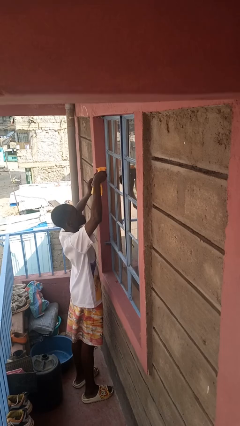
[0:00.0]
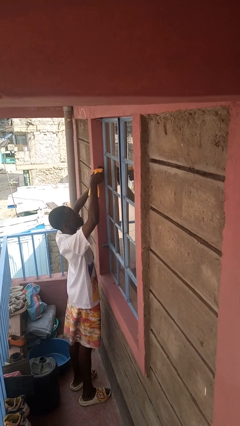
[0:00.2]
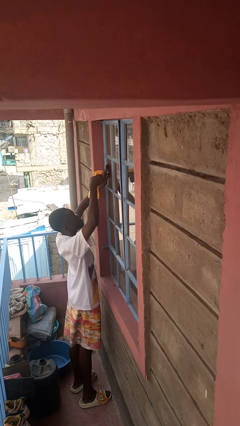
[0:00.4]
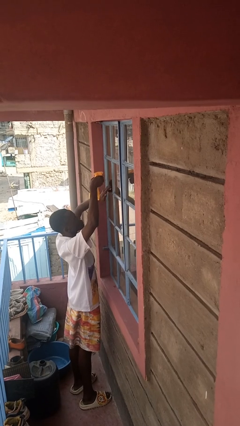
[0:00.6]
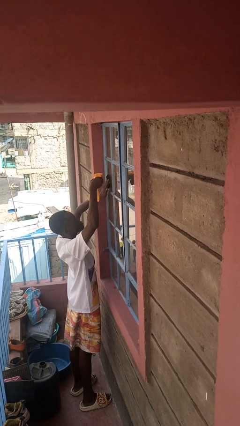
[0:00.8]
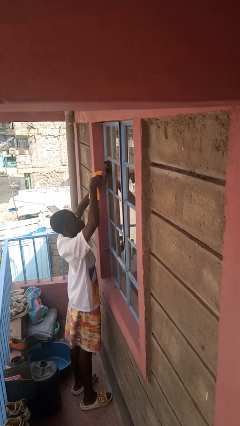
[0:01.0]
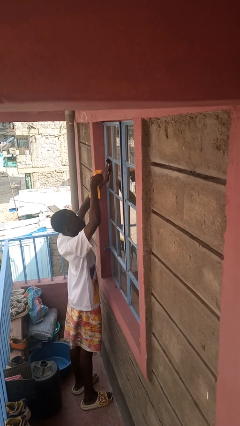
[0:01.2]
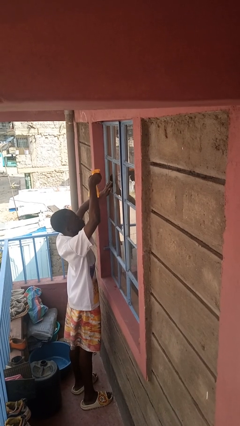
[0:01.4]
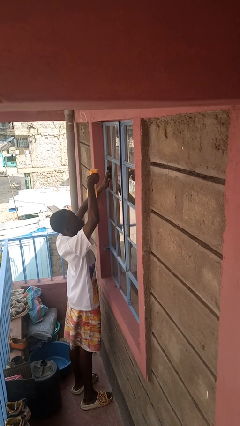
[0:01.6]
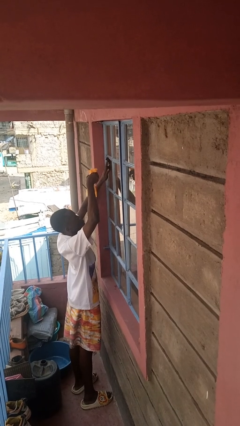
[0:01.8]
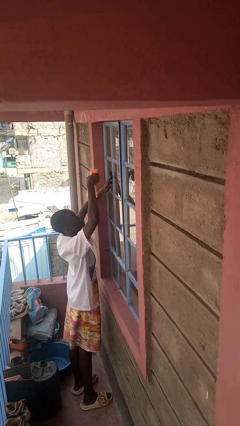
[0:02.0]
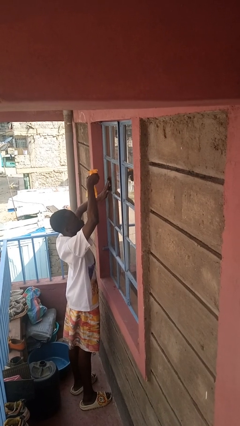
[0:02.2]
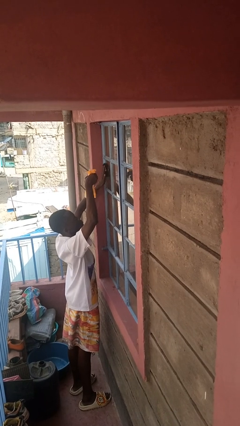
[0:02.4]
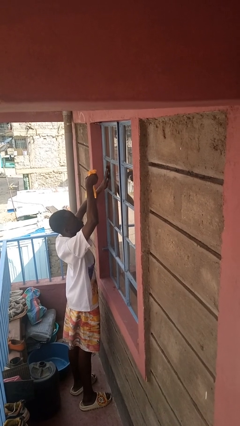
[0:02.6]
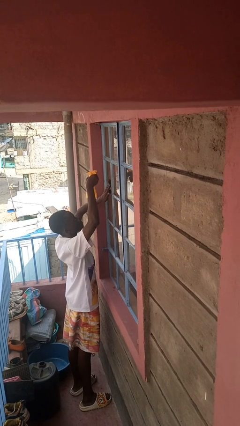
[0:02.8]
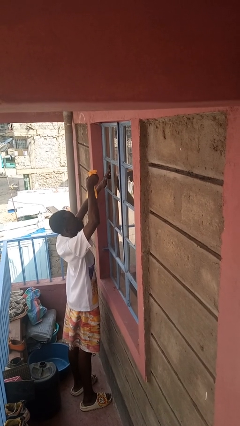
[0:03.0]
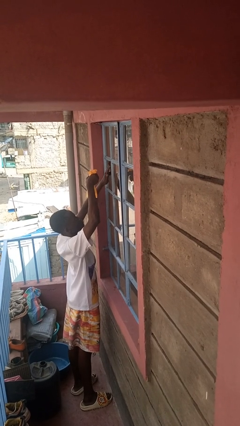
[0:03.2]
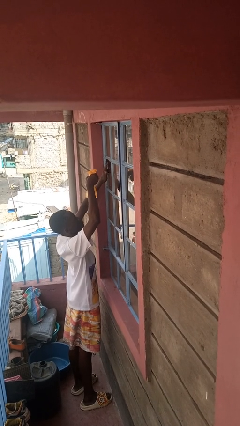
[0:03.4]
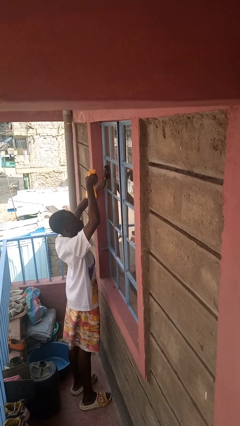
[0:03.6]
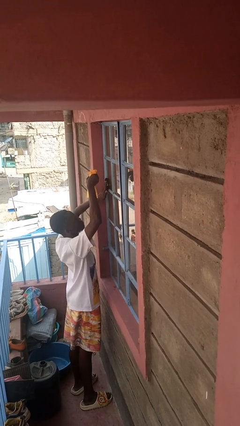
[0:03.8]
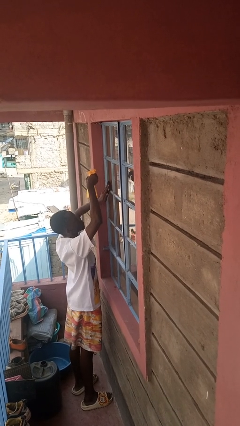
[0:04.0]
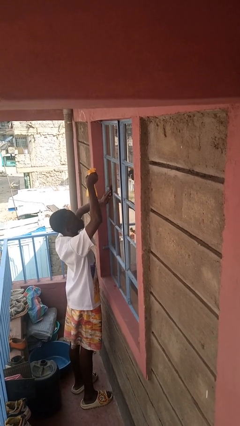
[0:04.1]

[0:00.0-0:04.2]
person washes window

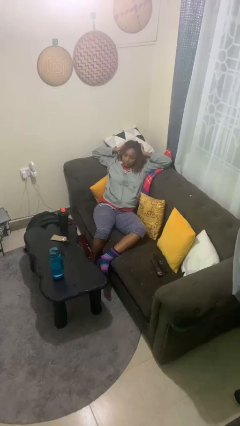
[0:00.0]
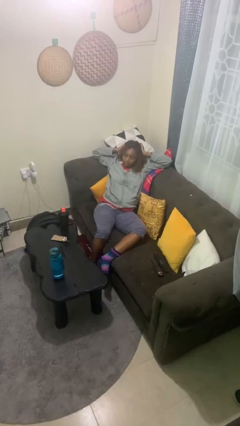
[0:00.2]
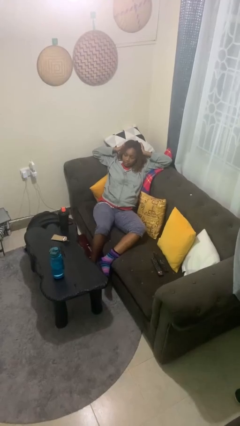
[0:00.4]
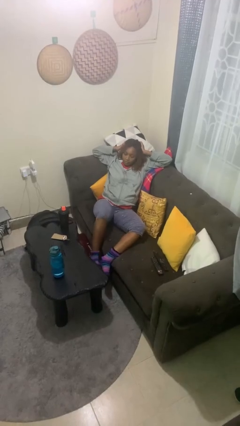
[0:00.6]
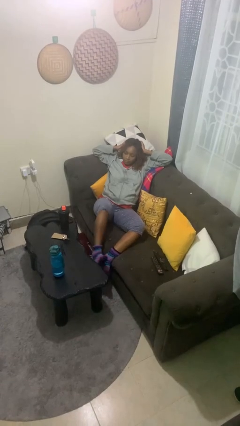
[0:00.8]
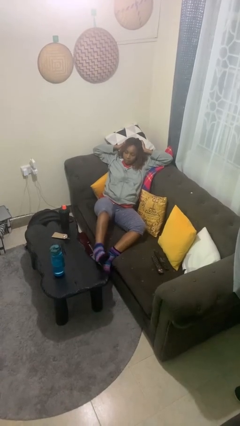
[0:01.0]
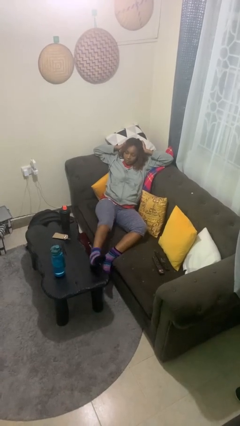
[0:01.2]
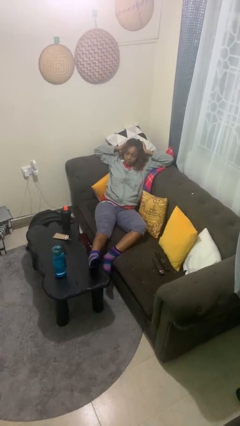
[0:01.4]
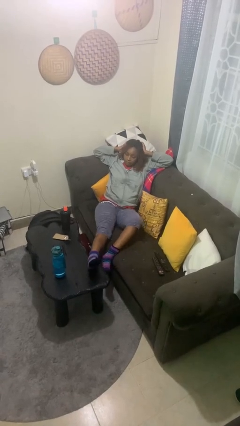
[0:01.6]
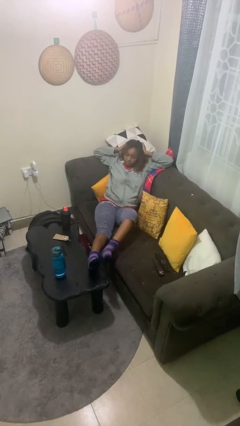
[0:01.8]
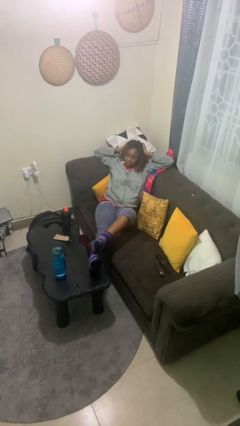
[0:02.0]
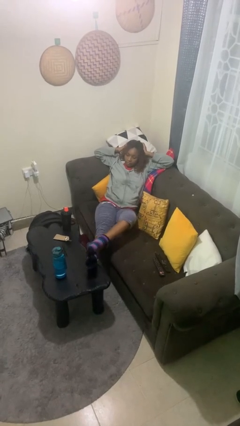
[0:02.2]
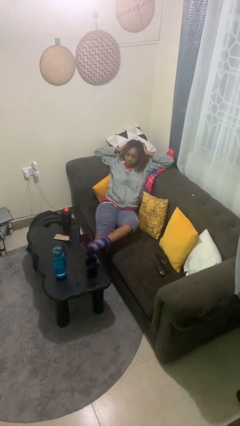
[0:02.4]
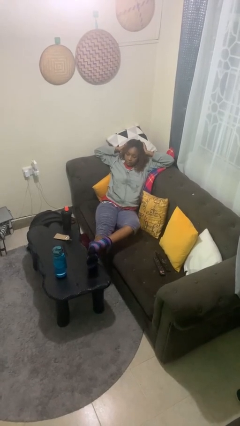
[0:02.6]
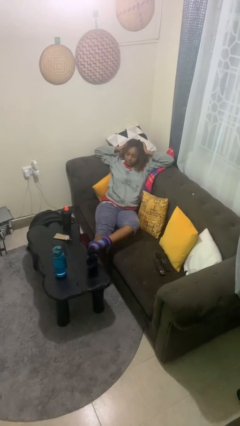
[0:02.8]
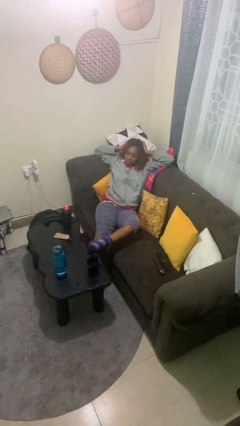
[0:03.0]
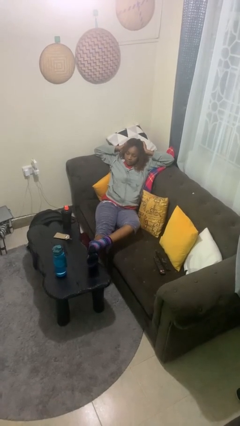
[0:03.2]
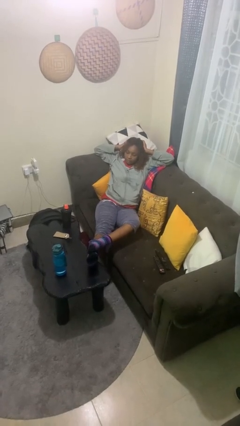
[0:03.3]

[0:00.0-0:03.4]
person puts feet up

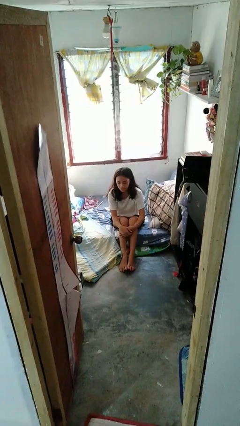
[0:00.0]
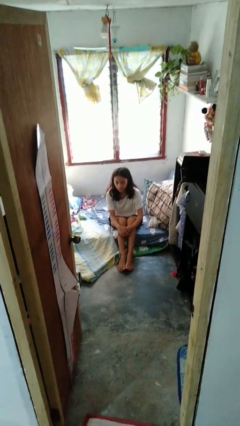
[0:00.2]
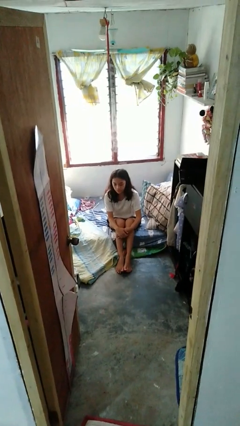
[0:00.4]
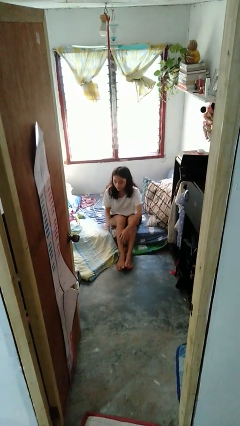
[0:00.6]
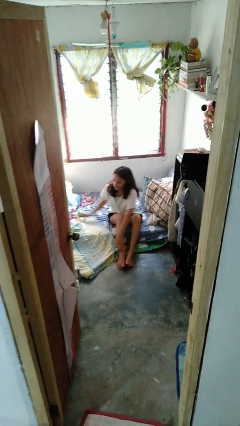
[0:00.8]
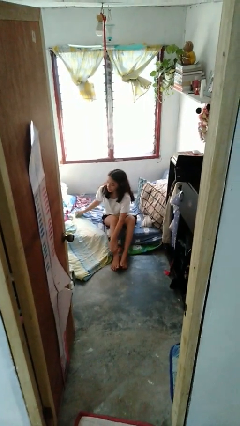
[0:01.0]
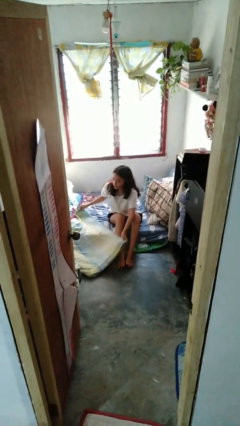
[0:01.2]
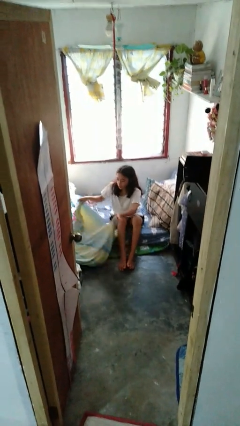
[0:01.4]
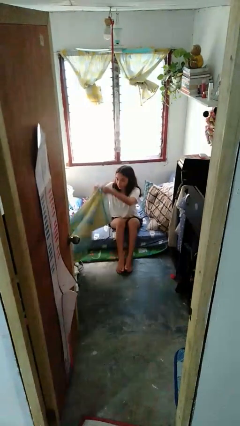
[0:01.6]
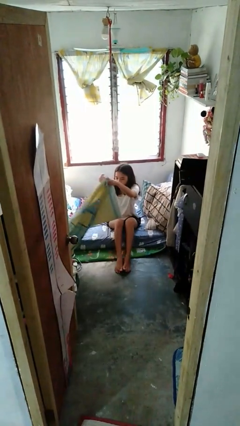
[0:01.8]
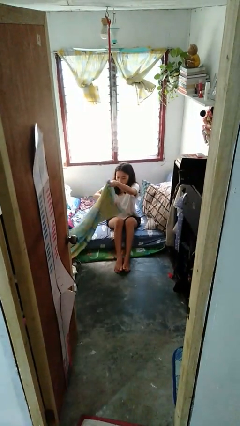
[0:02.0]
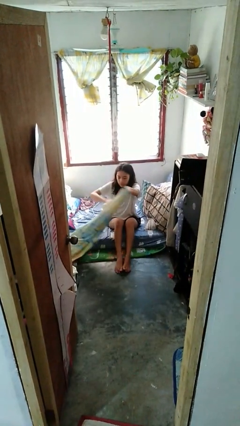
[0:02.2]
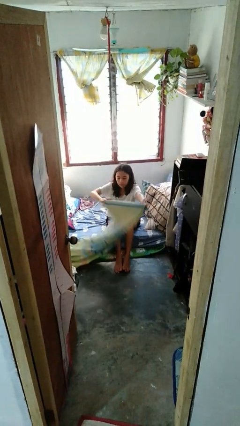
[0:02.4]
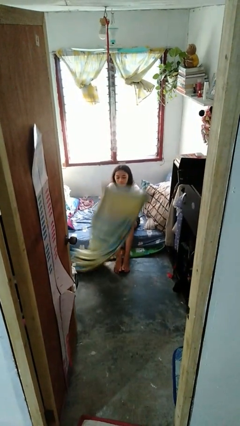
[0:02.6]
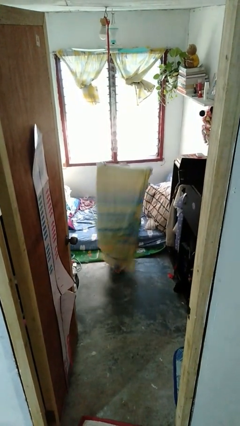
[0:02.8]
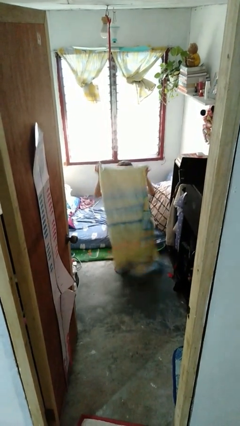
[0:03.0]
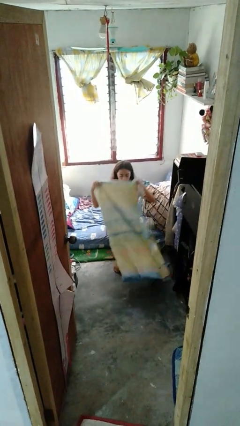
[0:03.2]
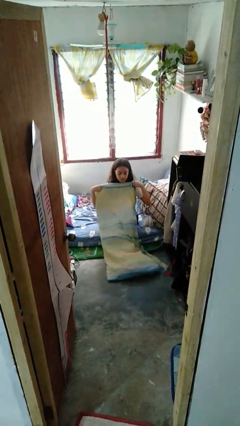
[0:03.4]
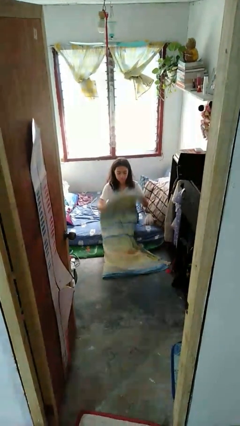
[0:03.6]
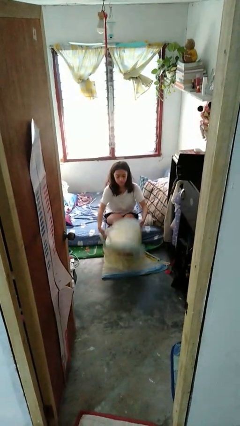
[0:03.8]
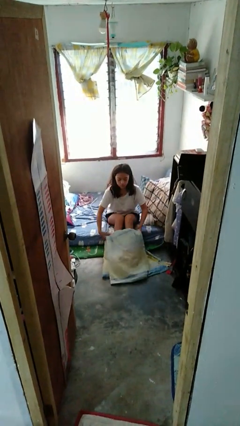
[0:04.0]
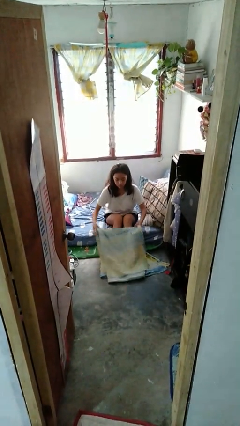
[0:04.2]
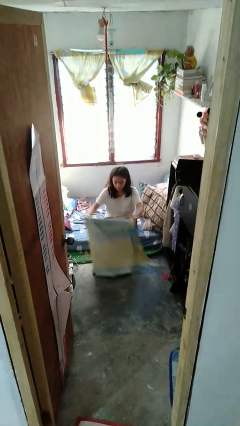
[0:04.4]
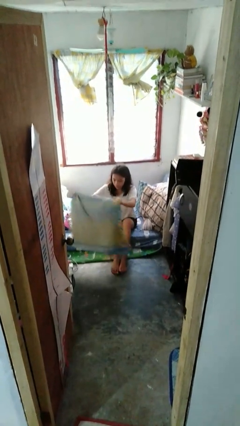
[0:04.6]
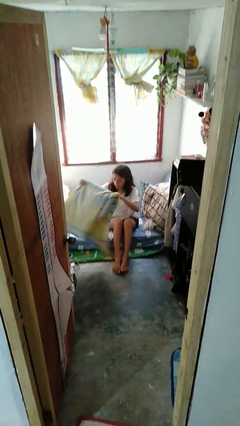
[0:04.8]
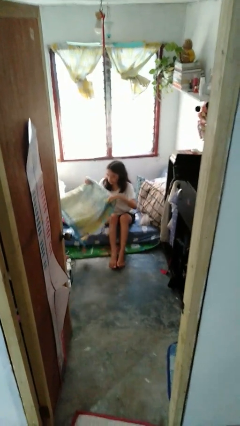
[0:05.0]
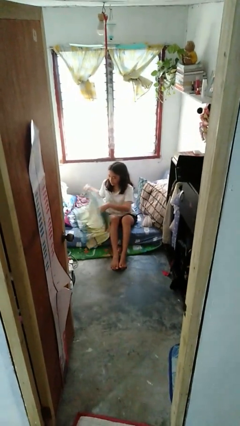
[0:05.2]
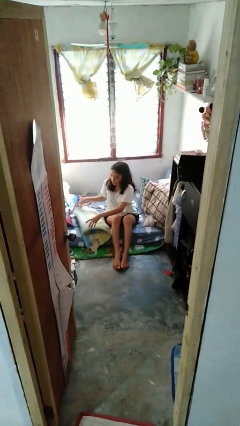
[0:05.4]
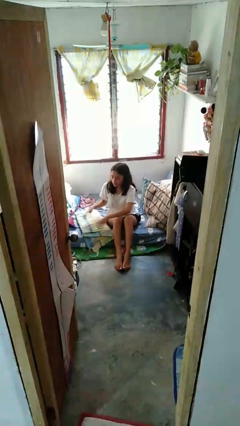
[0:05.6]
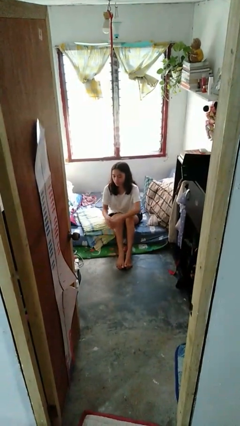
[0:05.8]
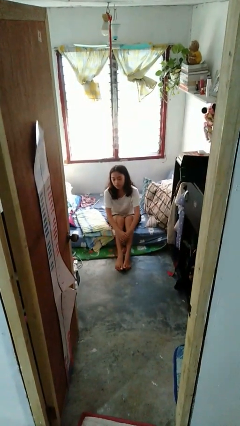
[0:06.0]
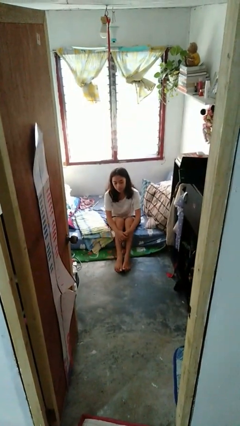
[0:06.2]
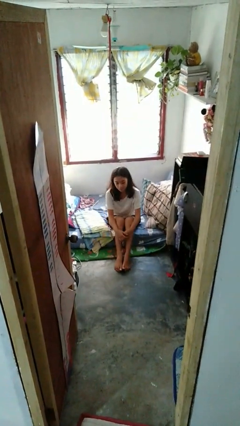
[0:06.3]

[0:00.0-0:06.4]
person folds blanket

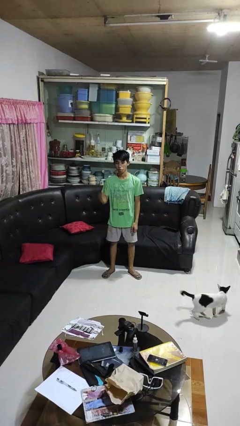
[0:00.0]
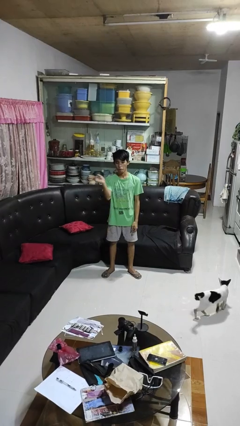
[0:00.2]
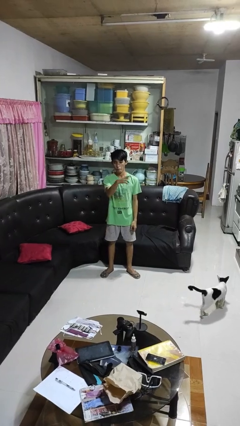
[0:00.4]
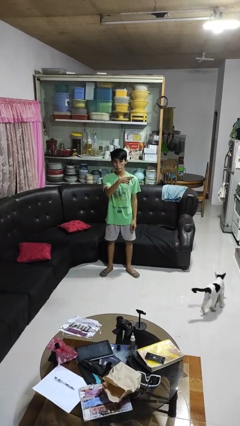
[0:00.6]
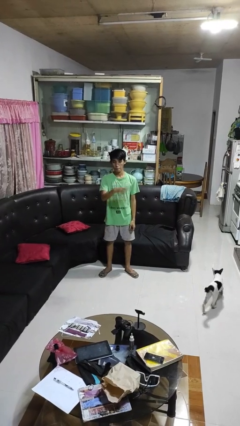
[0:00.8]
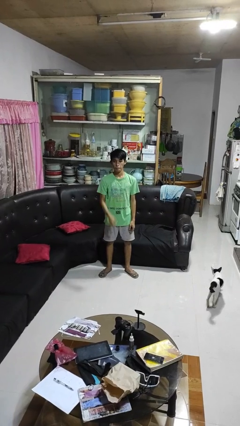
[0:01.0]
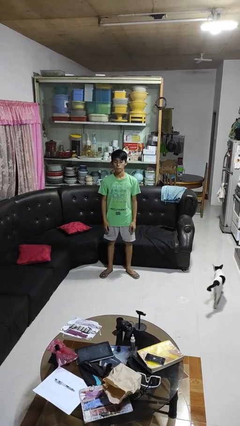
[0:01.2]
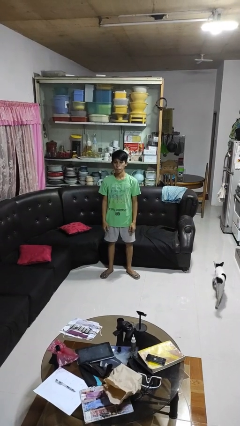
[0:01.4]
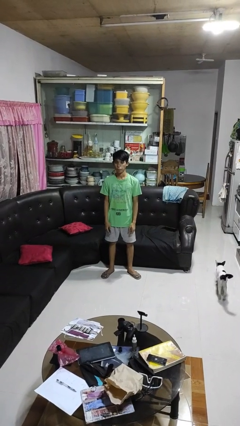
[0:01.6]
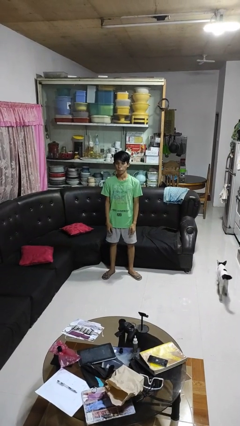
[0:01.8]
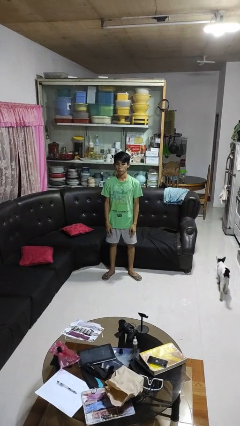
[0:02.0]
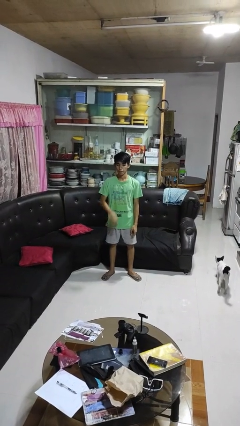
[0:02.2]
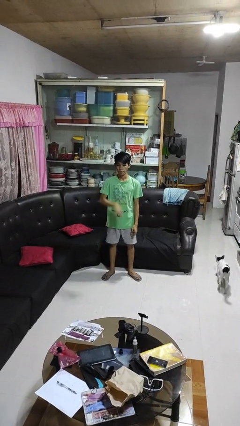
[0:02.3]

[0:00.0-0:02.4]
person gestures swipe left

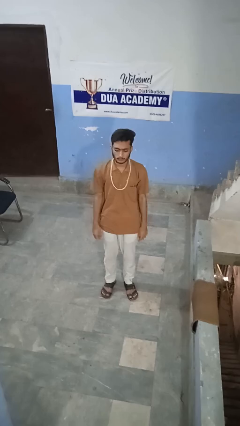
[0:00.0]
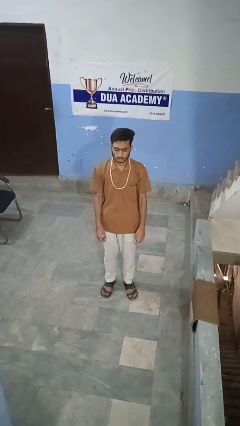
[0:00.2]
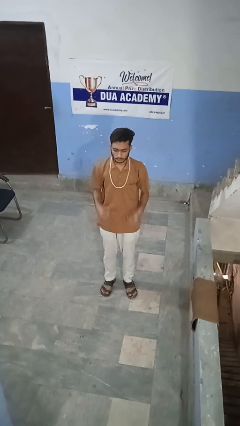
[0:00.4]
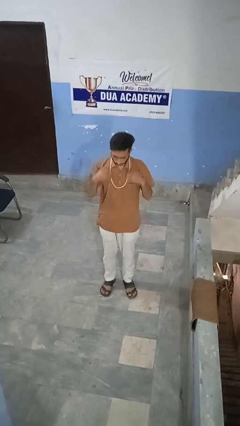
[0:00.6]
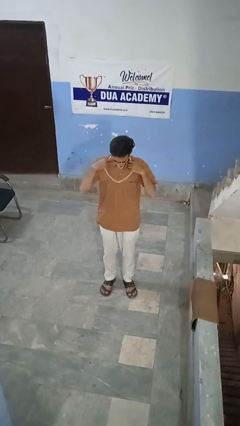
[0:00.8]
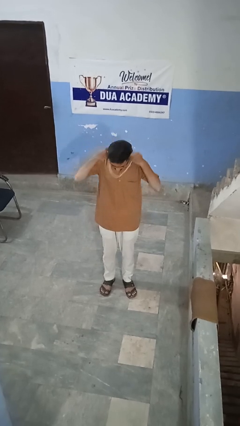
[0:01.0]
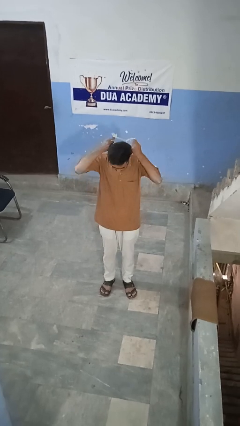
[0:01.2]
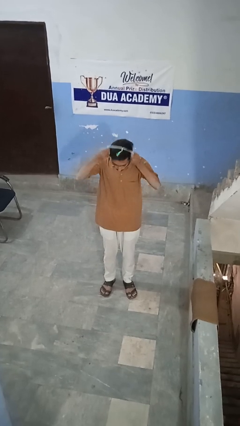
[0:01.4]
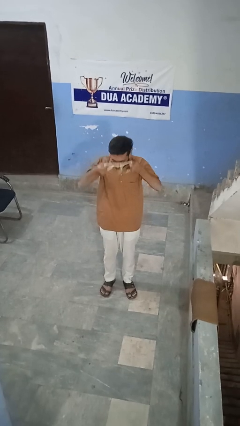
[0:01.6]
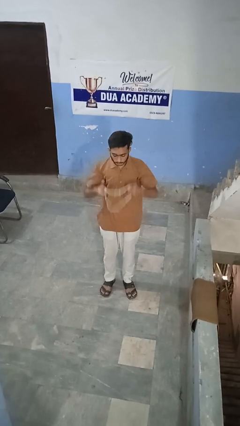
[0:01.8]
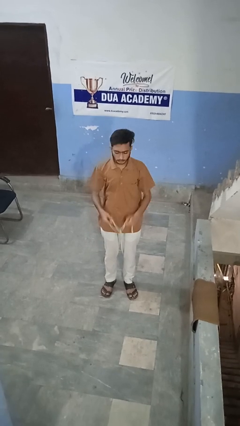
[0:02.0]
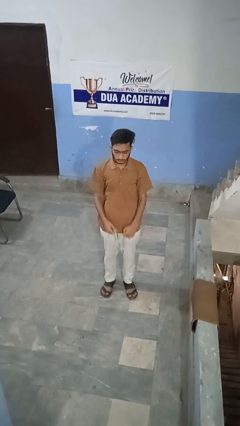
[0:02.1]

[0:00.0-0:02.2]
person takes off necklace
